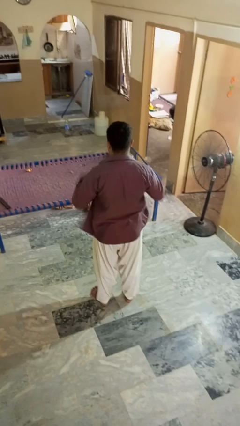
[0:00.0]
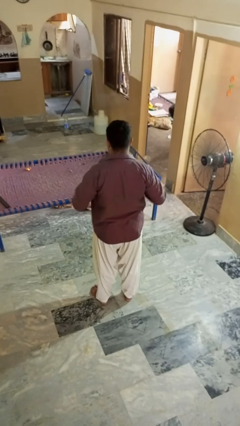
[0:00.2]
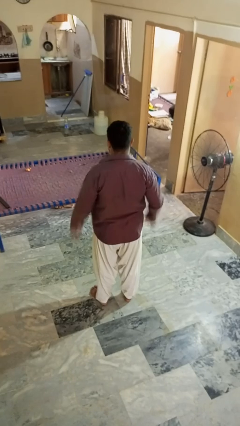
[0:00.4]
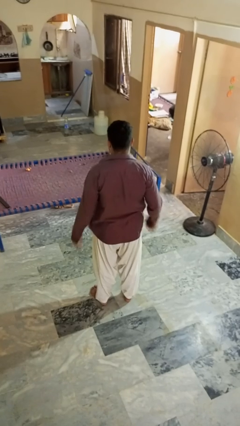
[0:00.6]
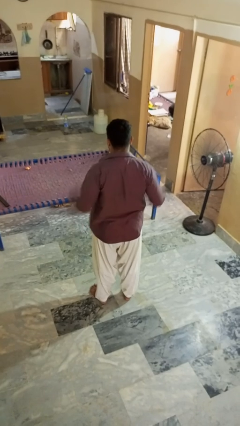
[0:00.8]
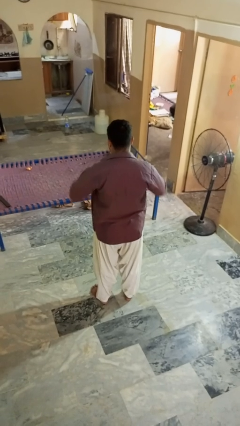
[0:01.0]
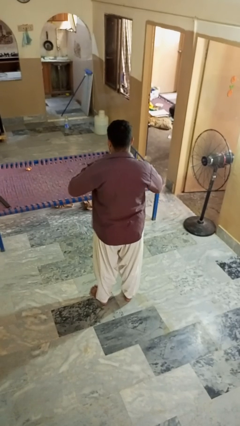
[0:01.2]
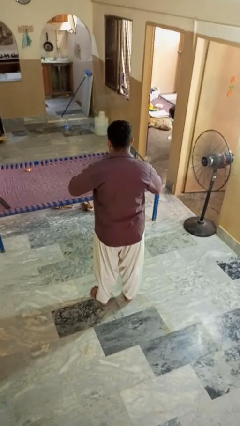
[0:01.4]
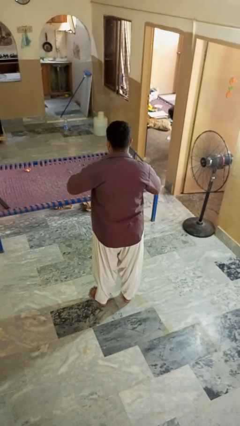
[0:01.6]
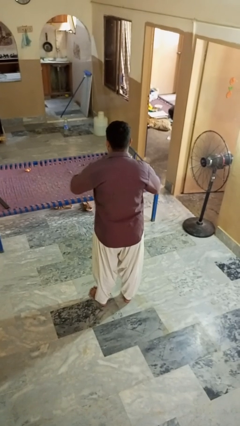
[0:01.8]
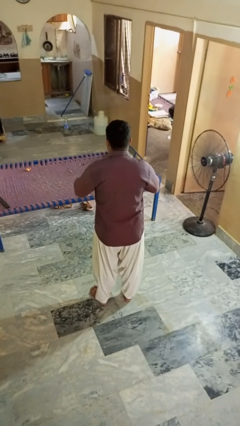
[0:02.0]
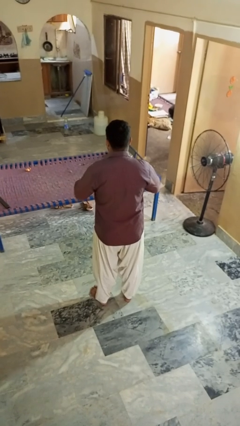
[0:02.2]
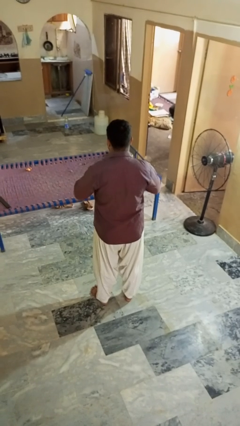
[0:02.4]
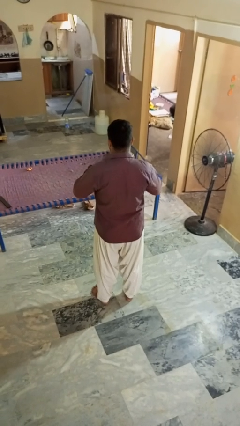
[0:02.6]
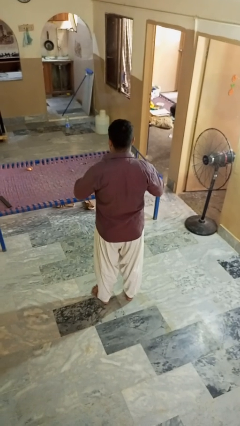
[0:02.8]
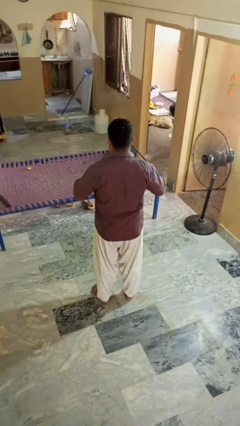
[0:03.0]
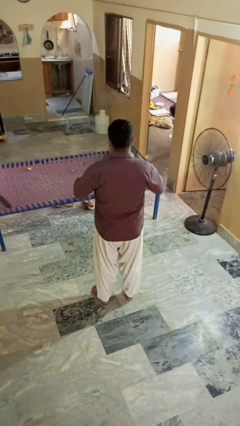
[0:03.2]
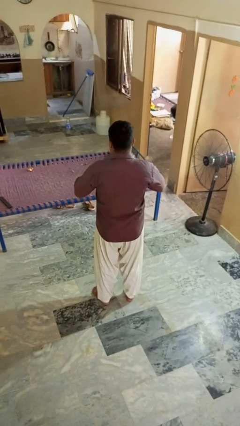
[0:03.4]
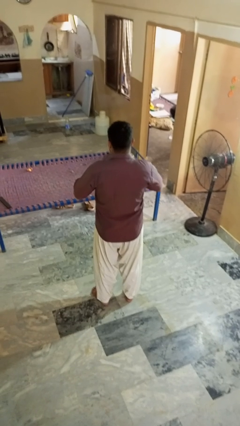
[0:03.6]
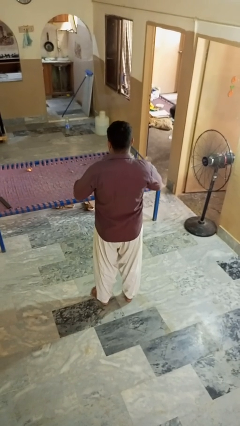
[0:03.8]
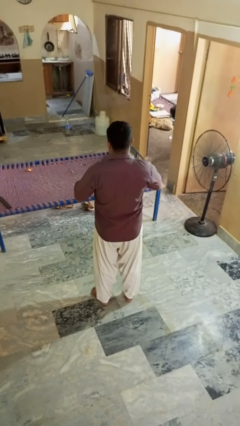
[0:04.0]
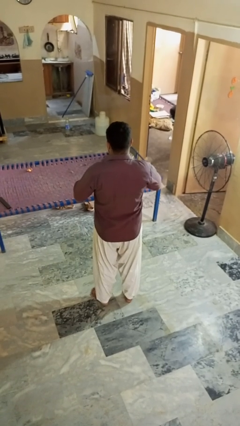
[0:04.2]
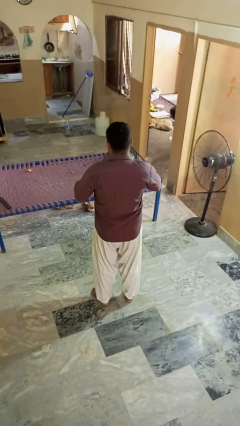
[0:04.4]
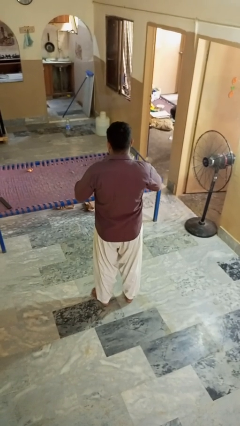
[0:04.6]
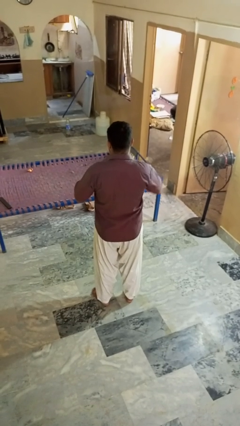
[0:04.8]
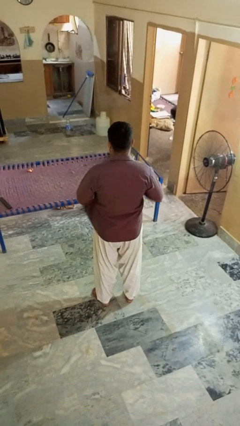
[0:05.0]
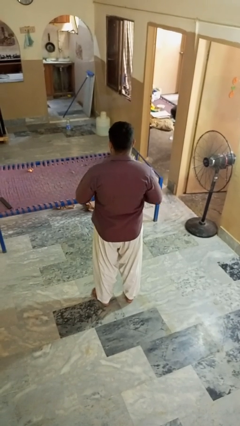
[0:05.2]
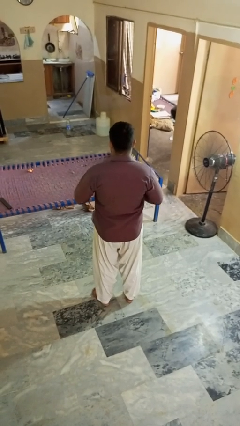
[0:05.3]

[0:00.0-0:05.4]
person buttons shirt

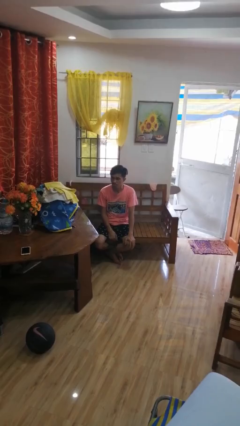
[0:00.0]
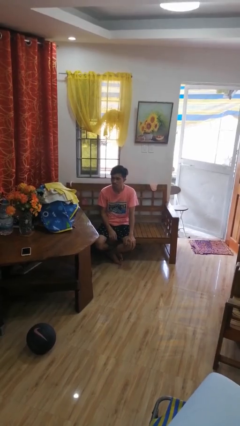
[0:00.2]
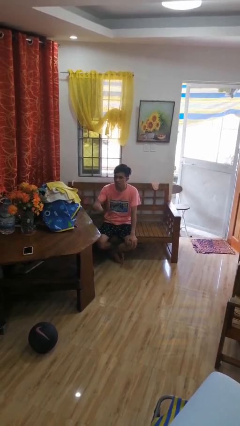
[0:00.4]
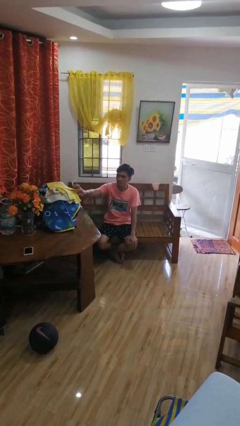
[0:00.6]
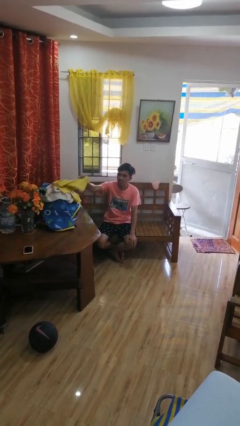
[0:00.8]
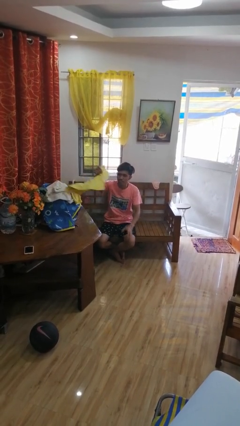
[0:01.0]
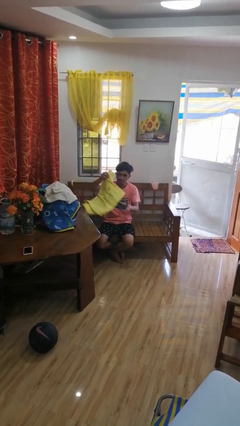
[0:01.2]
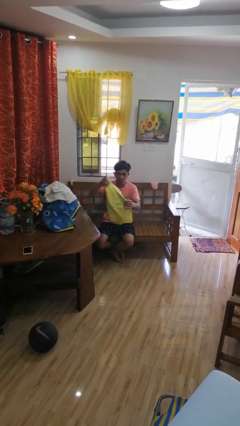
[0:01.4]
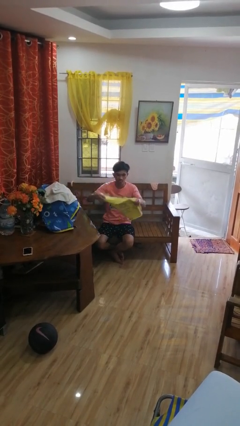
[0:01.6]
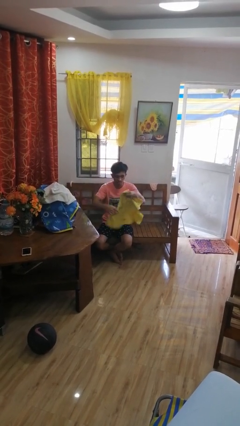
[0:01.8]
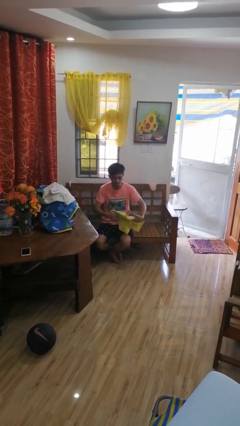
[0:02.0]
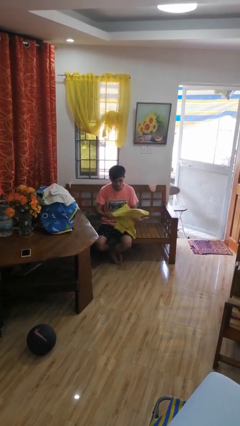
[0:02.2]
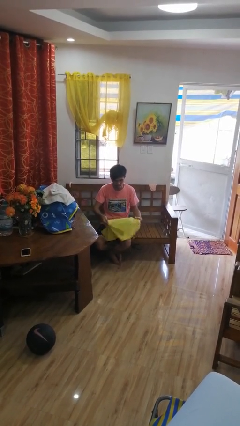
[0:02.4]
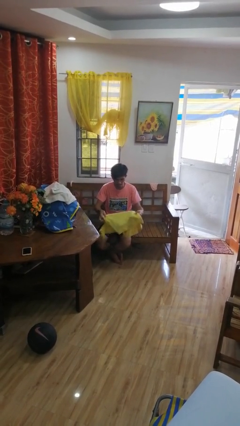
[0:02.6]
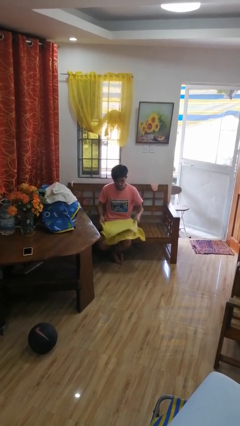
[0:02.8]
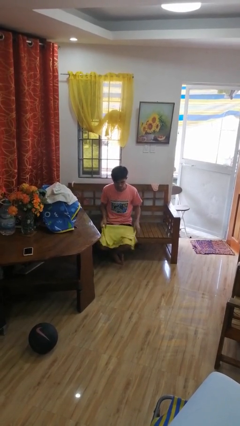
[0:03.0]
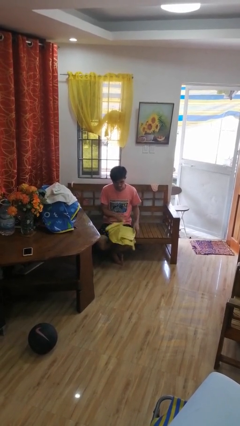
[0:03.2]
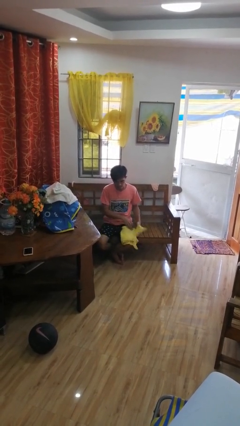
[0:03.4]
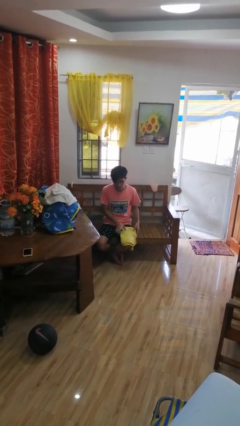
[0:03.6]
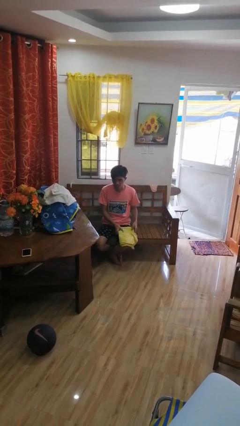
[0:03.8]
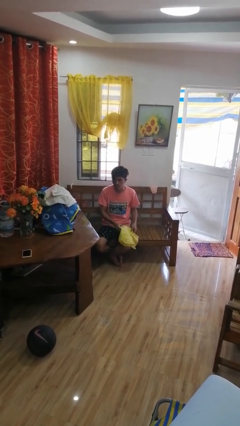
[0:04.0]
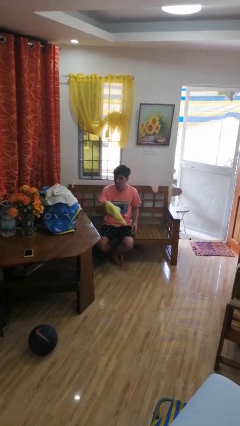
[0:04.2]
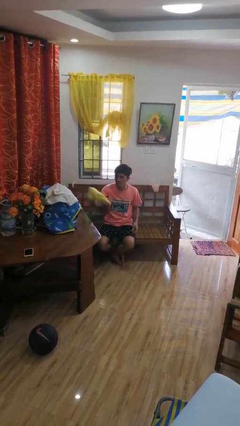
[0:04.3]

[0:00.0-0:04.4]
person folds shirt

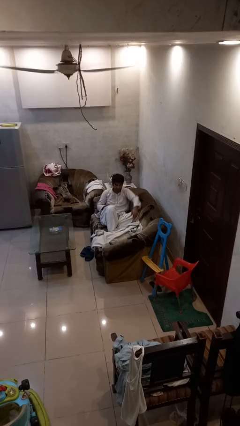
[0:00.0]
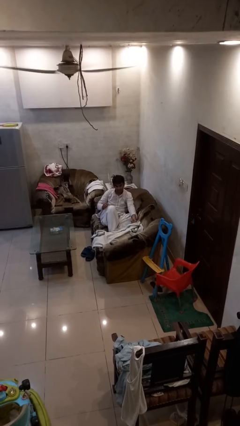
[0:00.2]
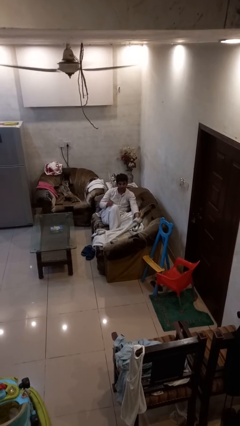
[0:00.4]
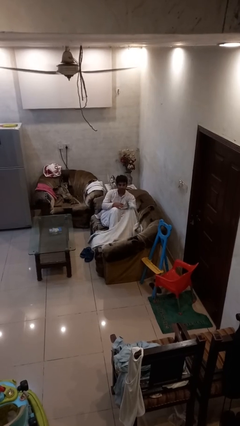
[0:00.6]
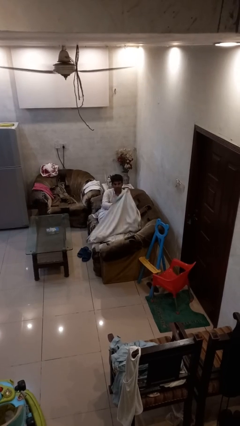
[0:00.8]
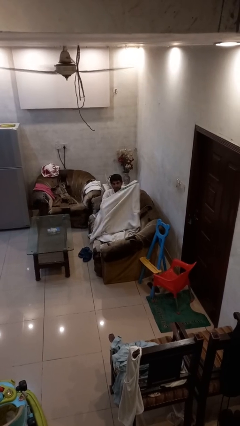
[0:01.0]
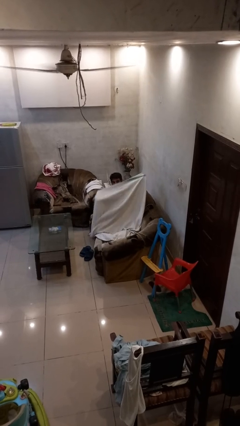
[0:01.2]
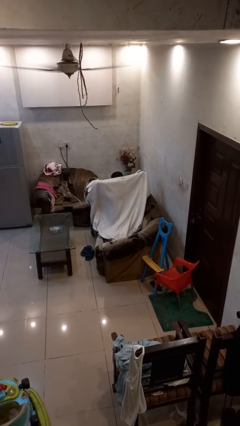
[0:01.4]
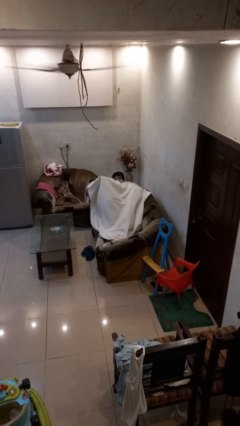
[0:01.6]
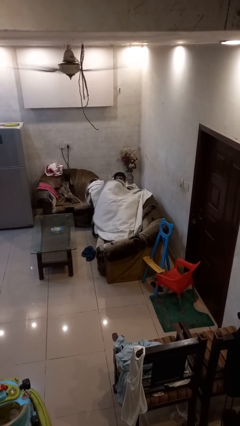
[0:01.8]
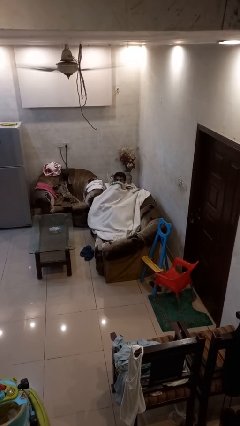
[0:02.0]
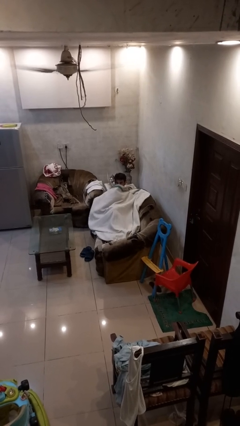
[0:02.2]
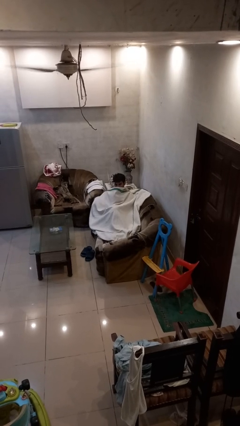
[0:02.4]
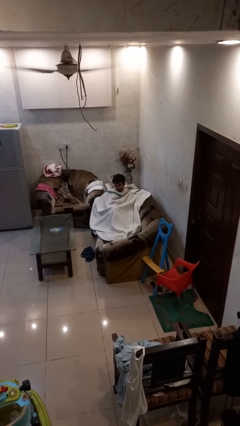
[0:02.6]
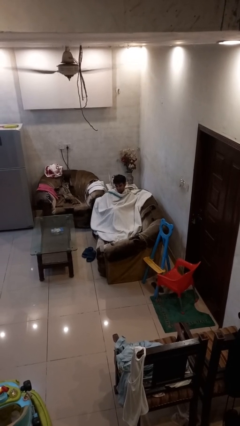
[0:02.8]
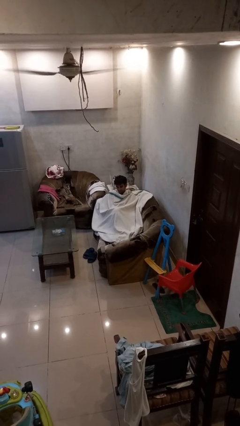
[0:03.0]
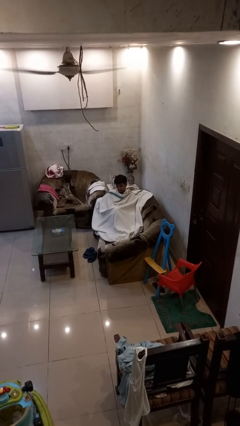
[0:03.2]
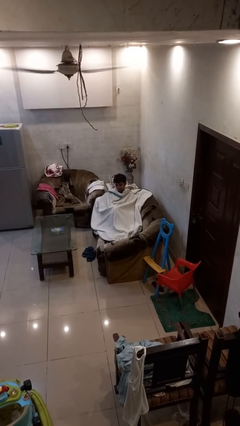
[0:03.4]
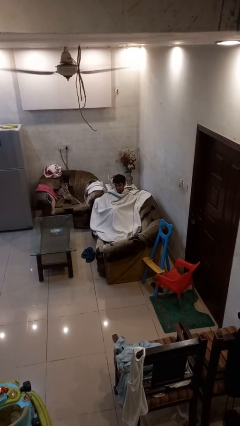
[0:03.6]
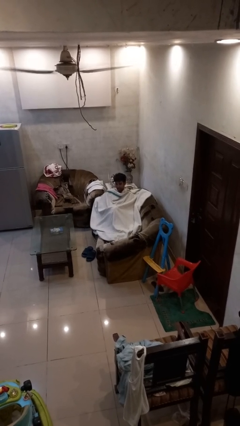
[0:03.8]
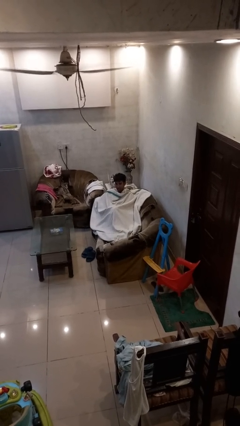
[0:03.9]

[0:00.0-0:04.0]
person covers with blanket

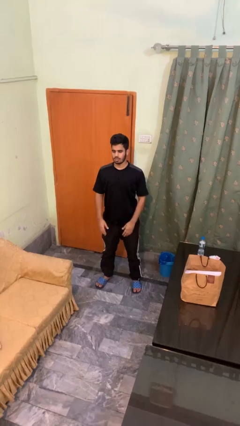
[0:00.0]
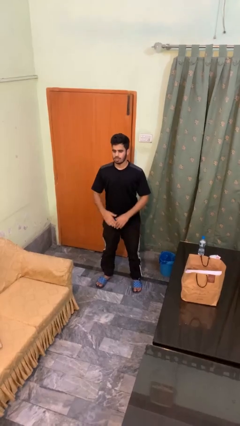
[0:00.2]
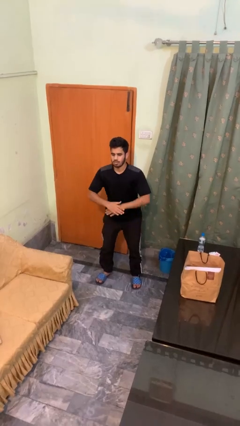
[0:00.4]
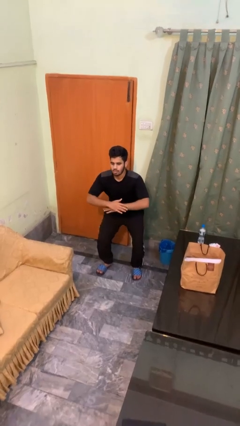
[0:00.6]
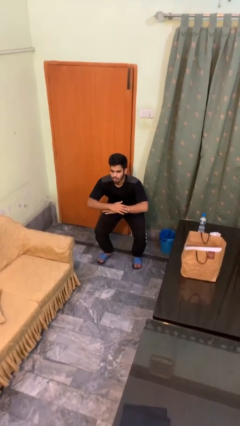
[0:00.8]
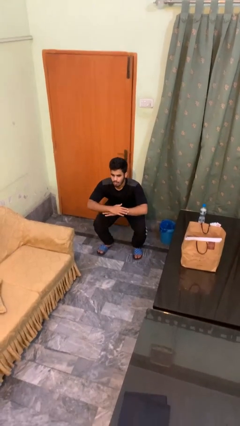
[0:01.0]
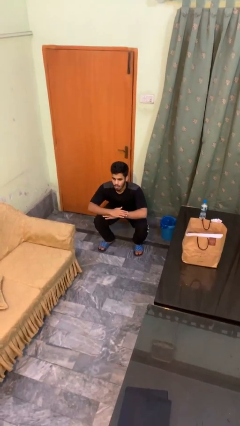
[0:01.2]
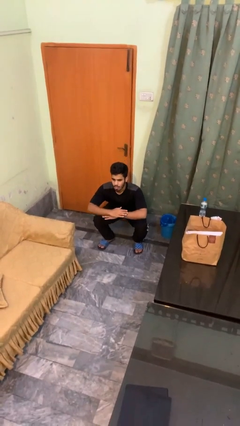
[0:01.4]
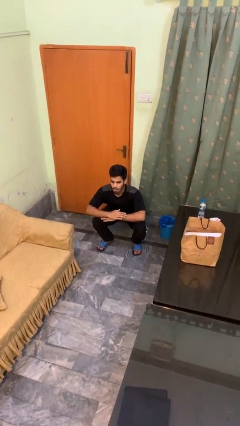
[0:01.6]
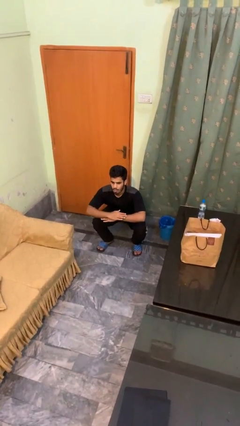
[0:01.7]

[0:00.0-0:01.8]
person squats

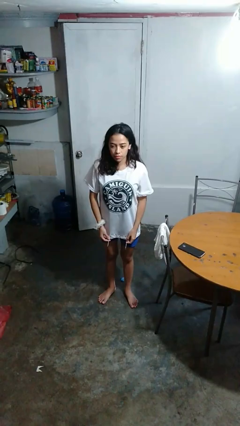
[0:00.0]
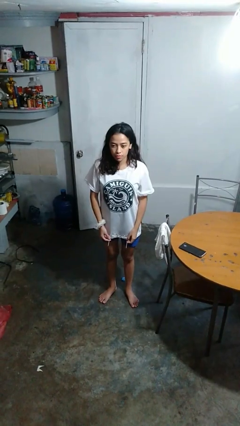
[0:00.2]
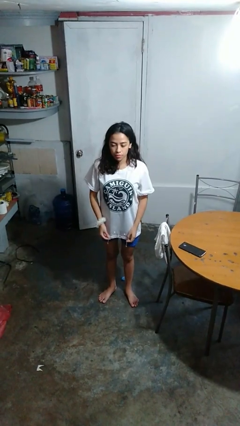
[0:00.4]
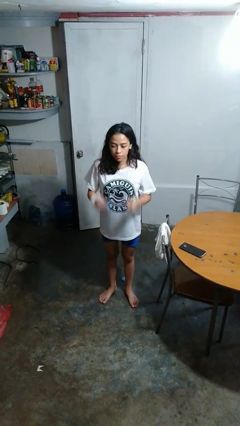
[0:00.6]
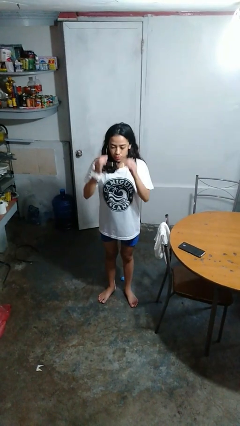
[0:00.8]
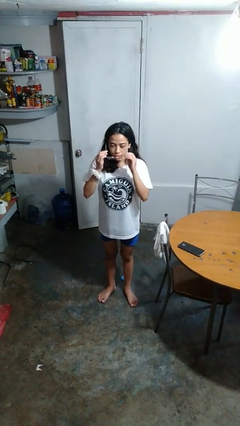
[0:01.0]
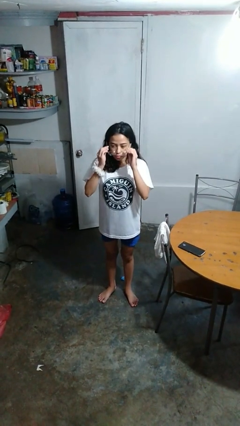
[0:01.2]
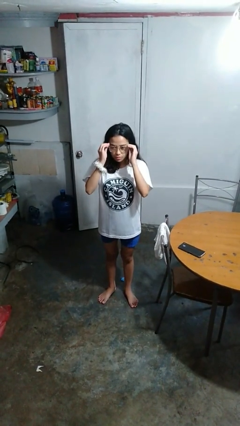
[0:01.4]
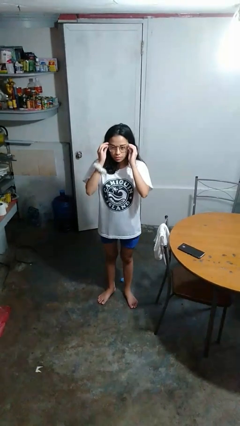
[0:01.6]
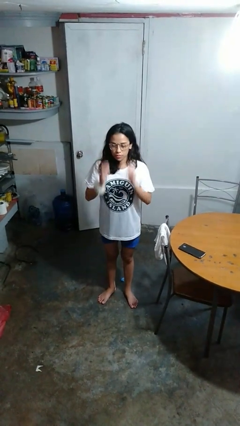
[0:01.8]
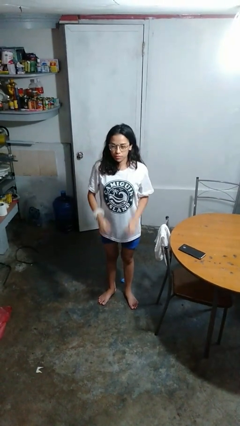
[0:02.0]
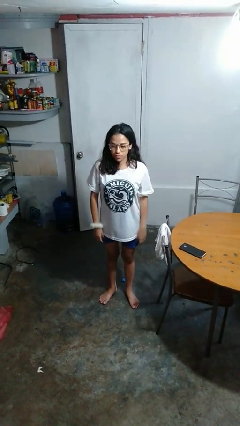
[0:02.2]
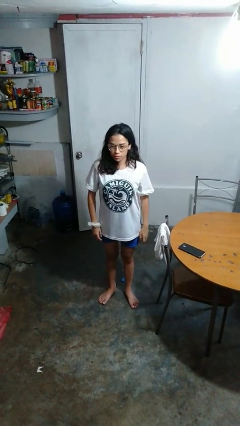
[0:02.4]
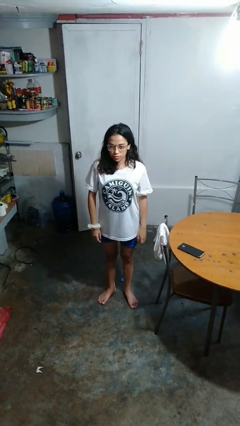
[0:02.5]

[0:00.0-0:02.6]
person puts on glasses
